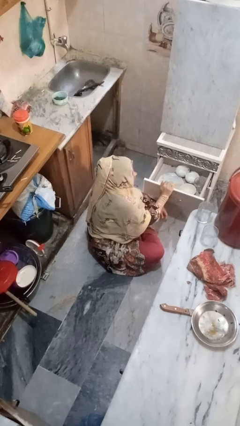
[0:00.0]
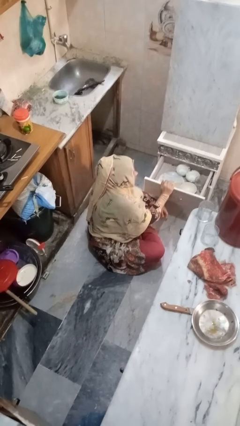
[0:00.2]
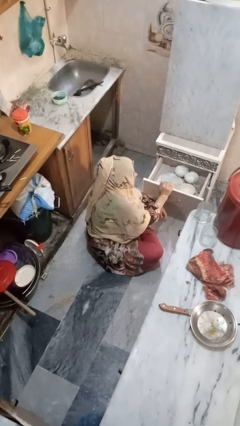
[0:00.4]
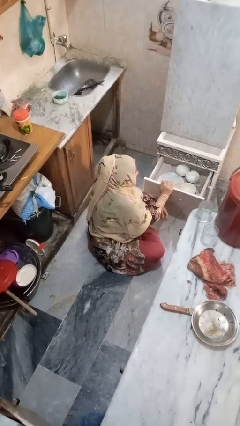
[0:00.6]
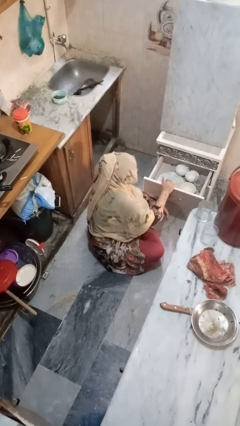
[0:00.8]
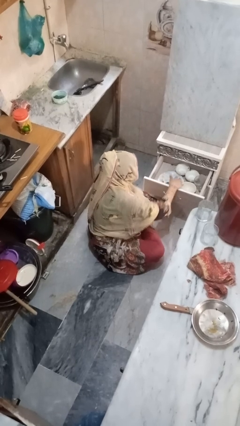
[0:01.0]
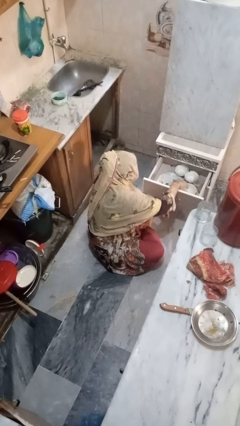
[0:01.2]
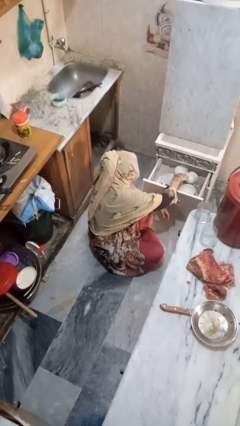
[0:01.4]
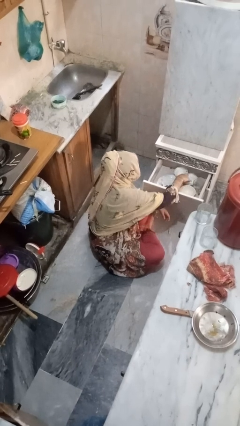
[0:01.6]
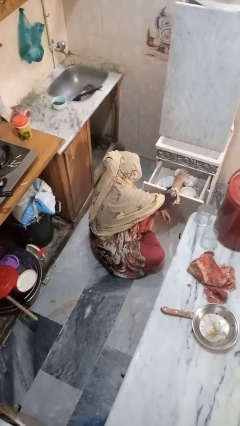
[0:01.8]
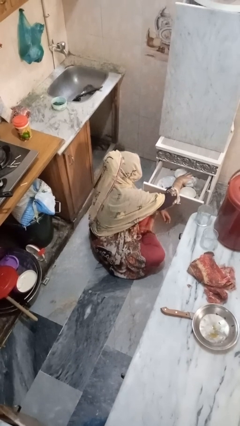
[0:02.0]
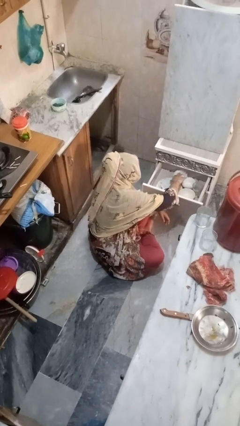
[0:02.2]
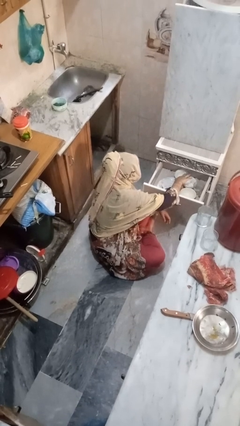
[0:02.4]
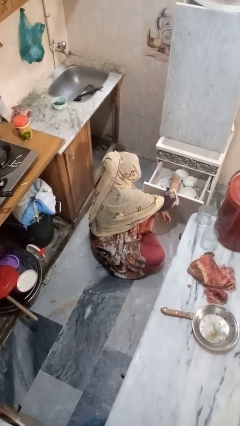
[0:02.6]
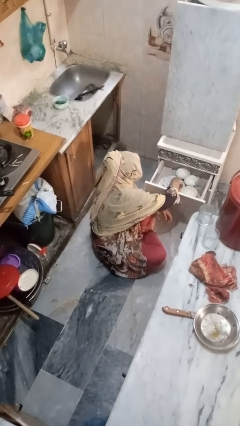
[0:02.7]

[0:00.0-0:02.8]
person searches in kitchen drawer

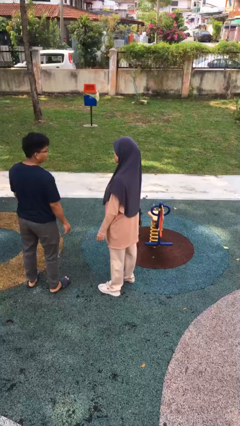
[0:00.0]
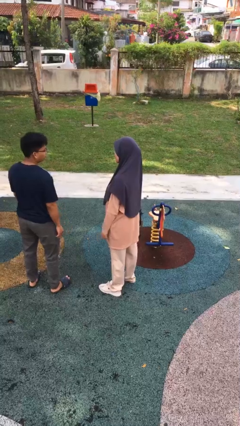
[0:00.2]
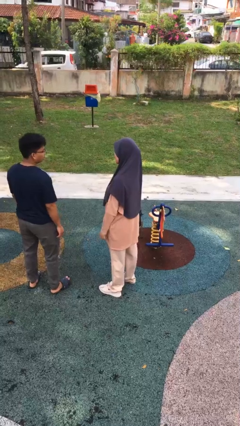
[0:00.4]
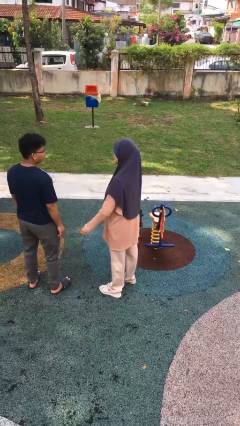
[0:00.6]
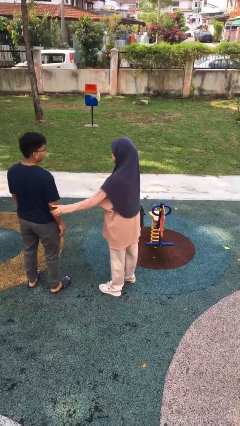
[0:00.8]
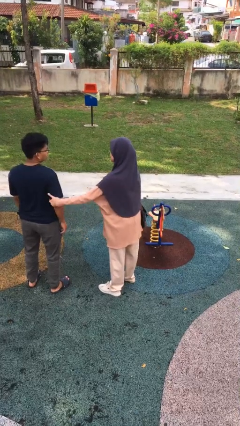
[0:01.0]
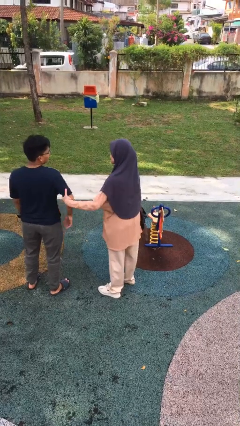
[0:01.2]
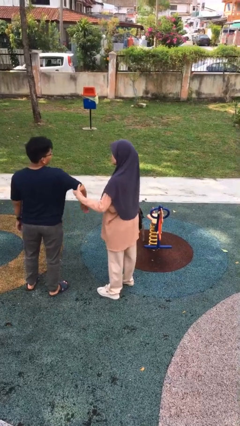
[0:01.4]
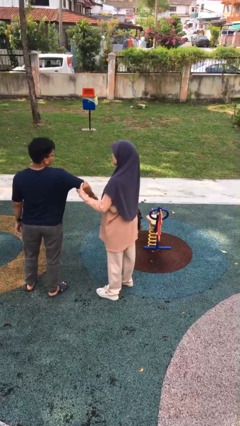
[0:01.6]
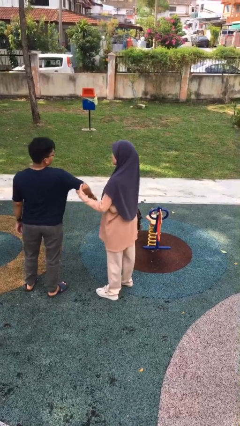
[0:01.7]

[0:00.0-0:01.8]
person grabs person by bicep

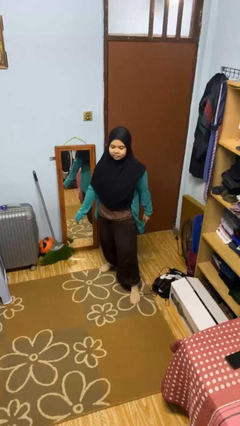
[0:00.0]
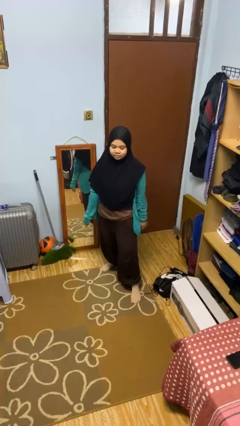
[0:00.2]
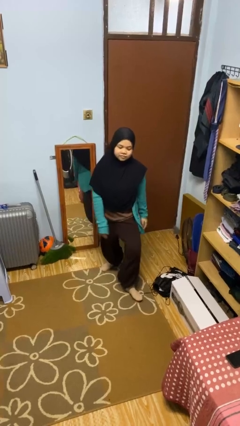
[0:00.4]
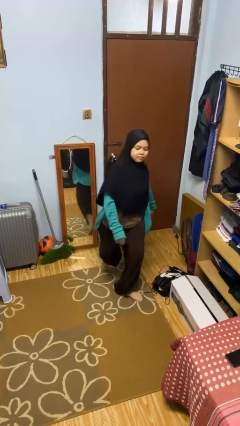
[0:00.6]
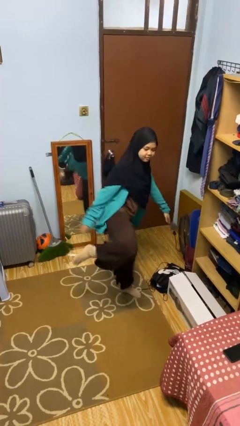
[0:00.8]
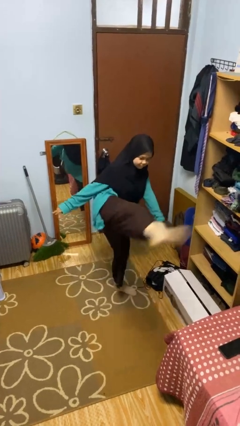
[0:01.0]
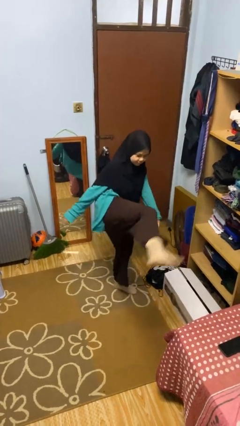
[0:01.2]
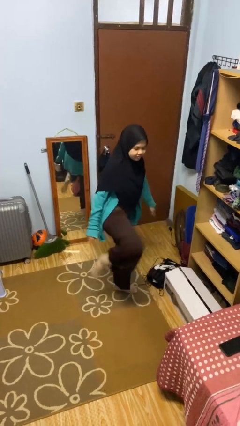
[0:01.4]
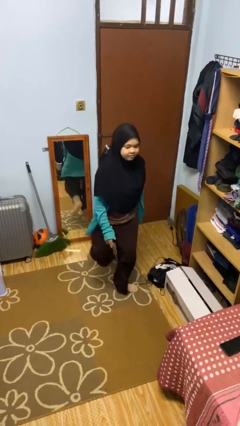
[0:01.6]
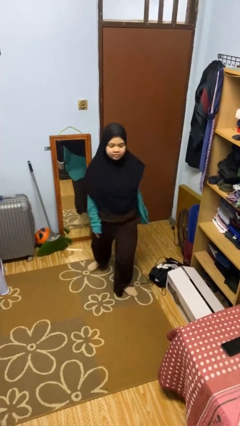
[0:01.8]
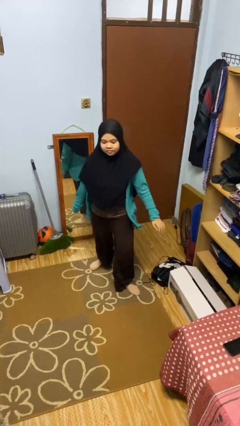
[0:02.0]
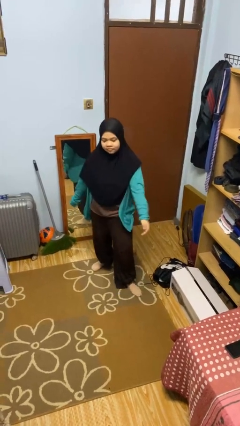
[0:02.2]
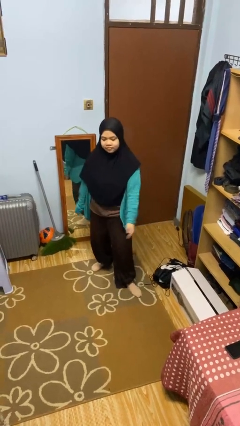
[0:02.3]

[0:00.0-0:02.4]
person karate kicks

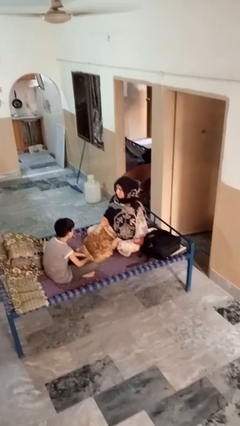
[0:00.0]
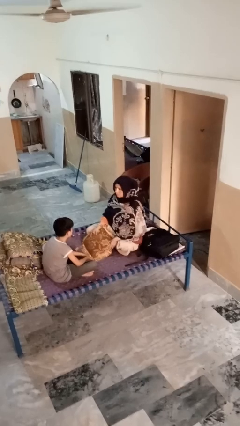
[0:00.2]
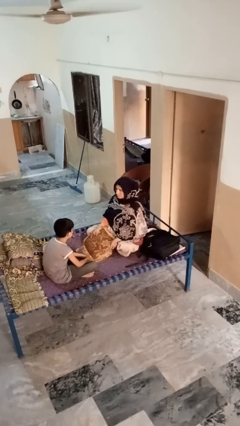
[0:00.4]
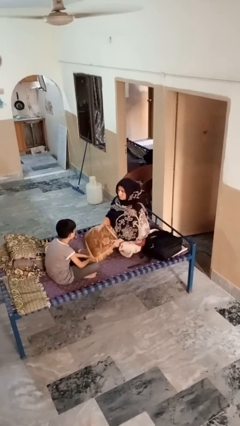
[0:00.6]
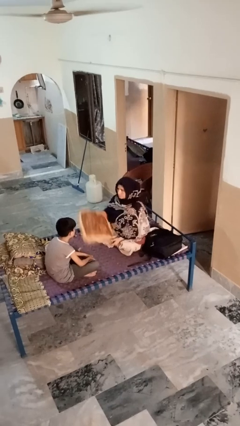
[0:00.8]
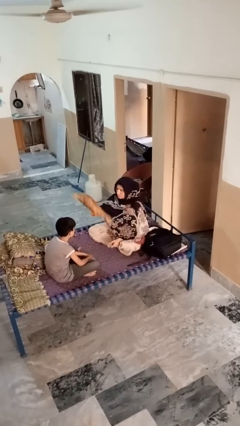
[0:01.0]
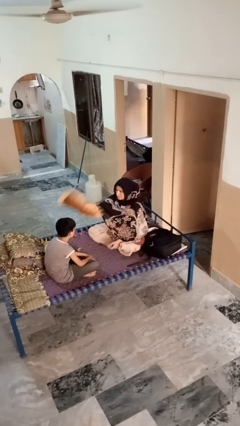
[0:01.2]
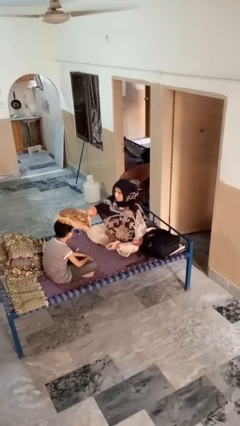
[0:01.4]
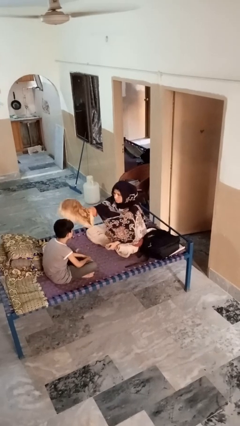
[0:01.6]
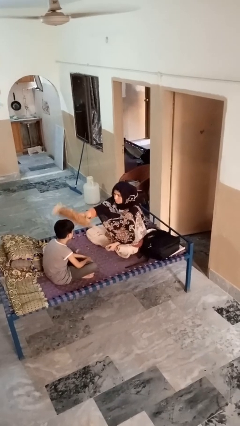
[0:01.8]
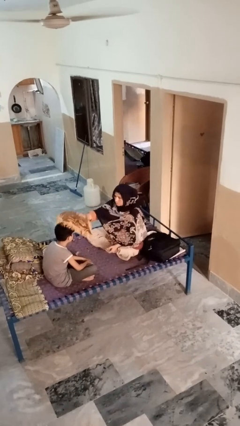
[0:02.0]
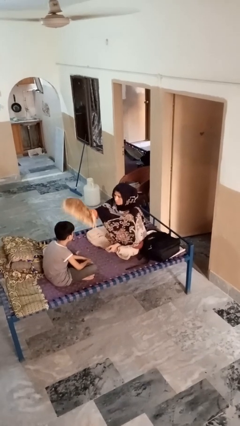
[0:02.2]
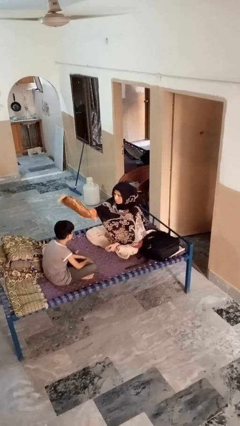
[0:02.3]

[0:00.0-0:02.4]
person hits person with pillow

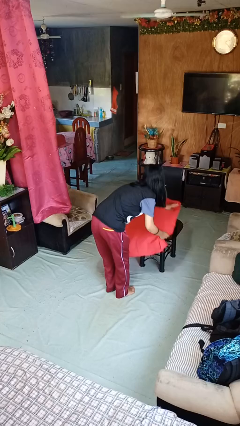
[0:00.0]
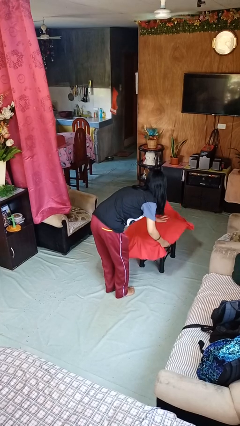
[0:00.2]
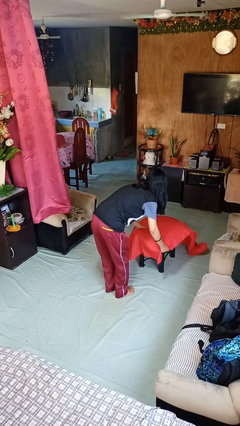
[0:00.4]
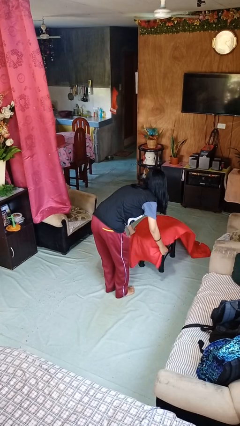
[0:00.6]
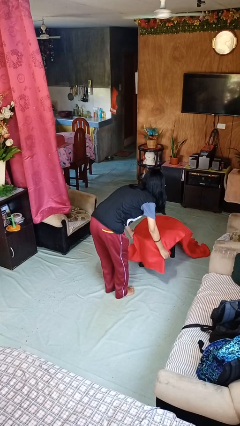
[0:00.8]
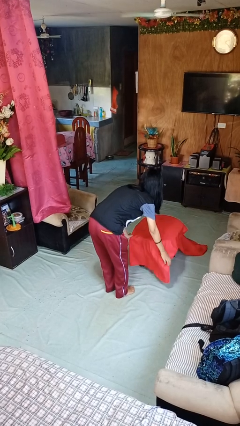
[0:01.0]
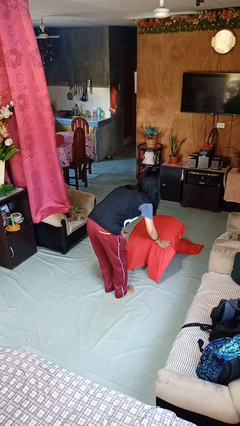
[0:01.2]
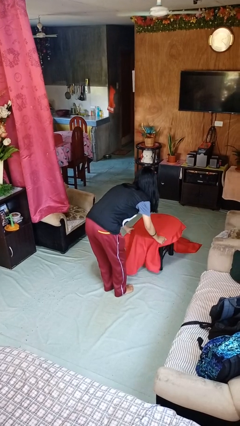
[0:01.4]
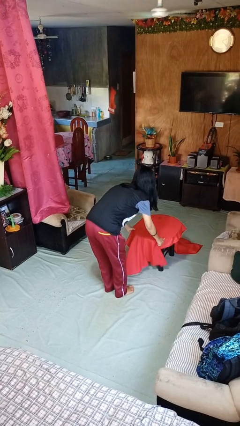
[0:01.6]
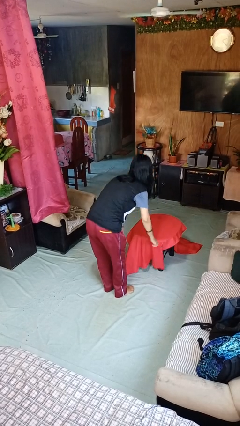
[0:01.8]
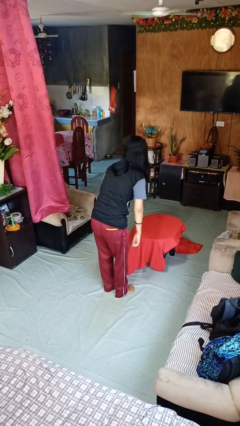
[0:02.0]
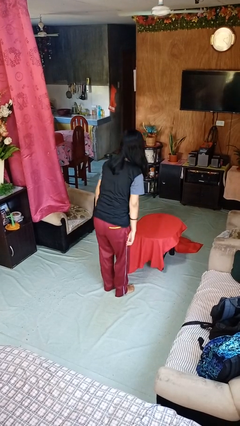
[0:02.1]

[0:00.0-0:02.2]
person spreads tablecloth

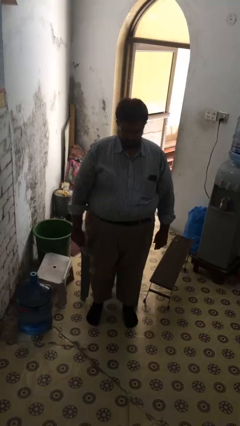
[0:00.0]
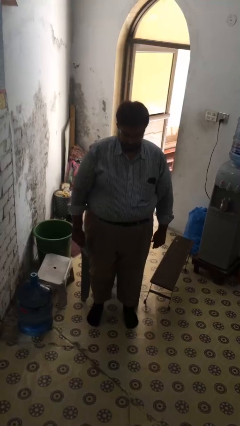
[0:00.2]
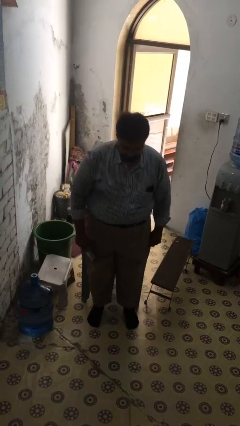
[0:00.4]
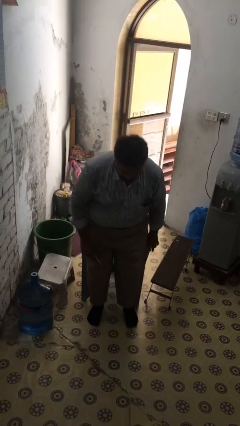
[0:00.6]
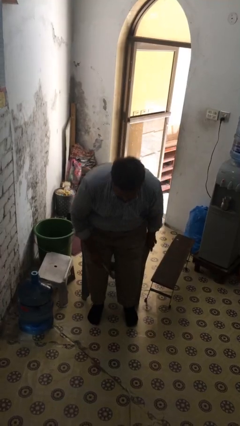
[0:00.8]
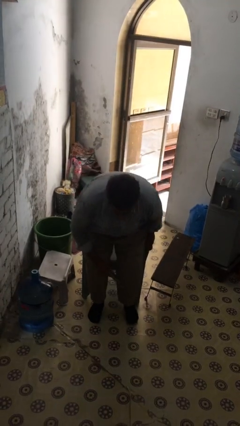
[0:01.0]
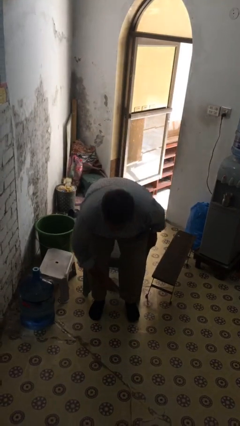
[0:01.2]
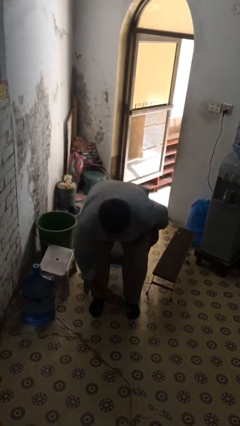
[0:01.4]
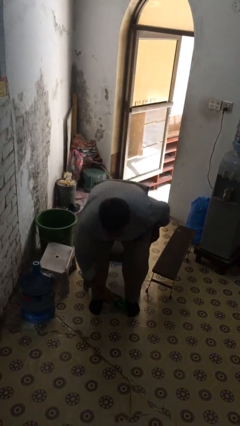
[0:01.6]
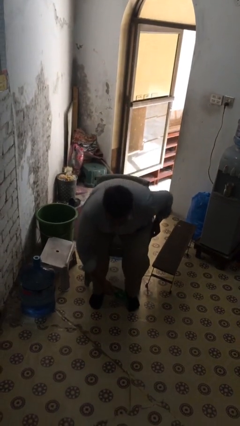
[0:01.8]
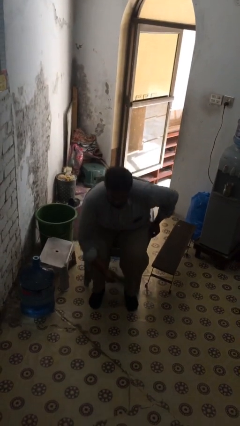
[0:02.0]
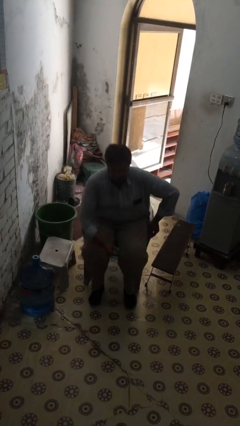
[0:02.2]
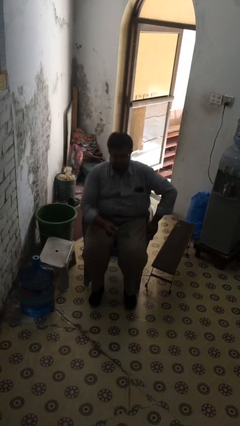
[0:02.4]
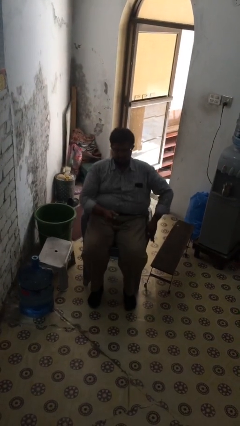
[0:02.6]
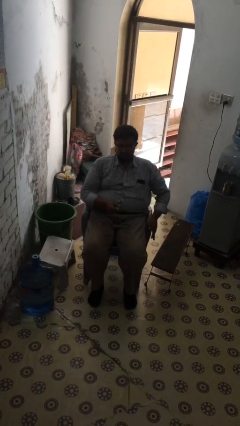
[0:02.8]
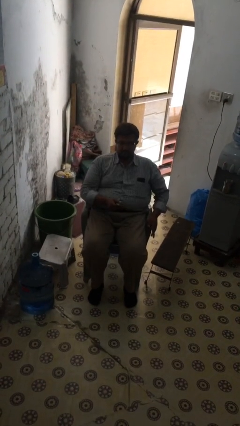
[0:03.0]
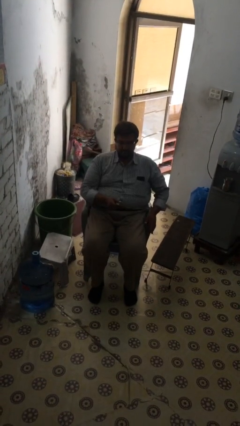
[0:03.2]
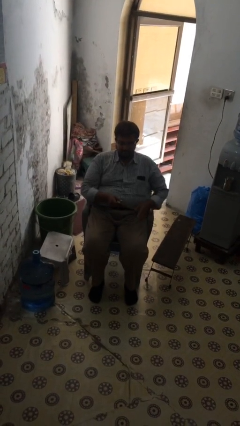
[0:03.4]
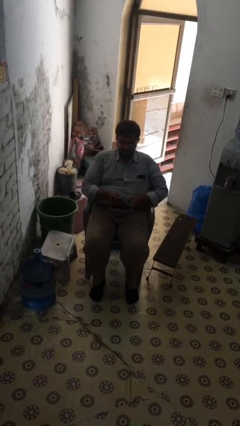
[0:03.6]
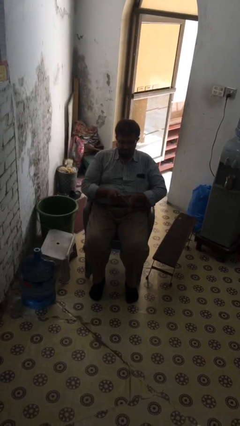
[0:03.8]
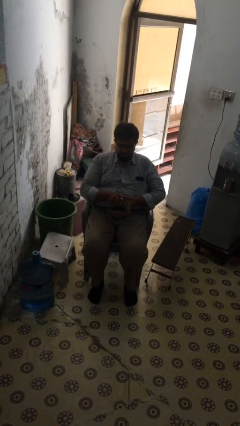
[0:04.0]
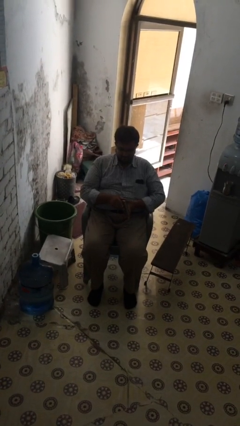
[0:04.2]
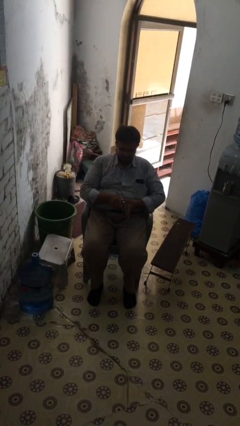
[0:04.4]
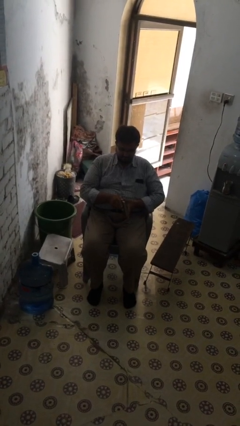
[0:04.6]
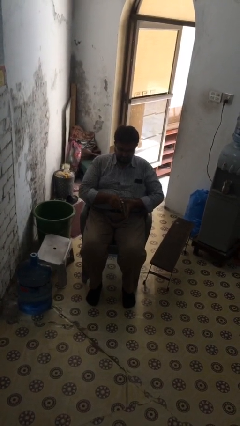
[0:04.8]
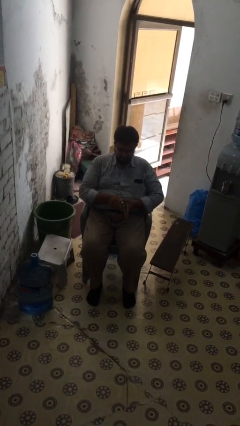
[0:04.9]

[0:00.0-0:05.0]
person sits down

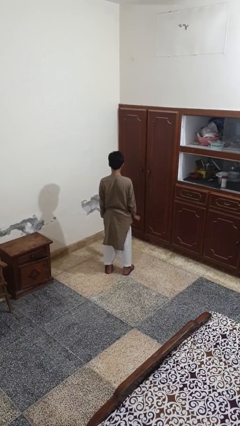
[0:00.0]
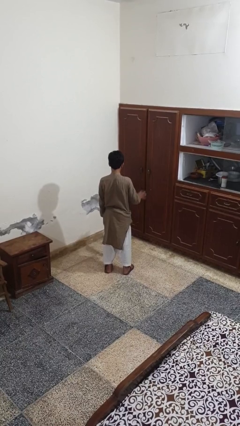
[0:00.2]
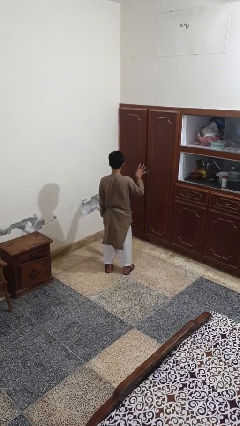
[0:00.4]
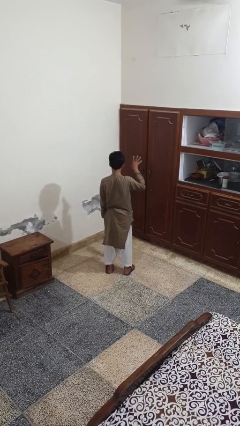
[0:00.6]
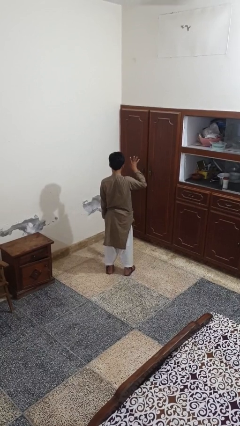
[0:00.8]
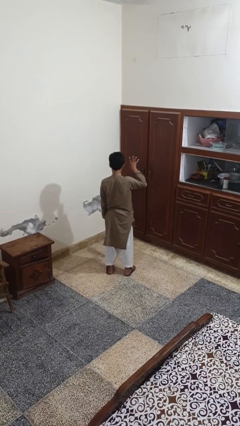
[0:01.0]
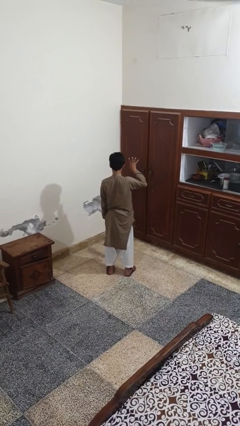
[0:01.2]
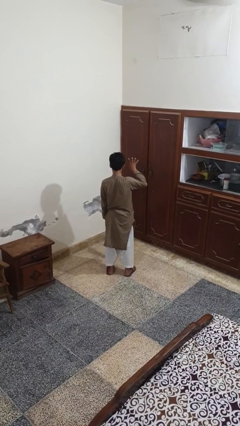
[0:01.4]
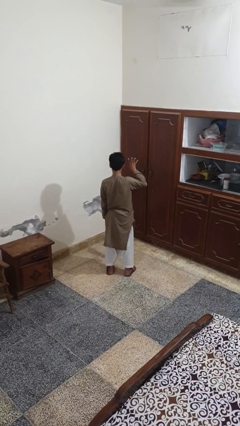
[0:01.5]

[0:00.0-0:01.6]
person gestures number four
